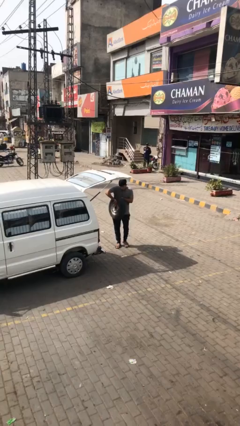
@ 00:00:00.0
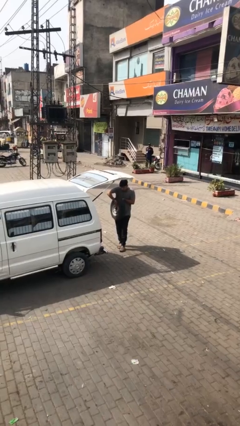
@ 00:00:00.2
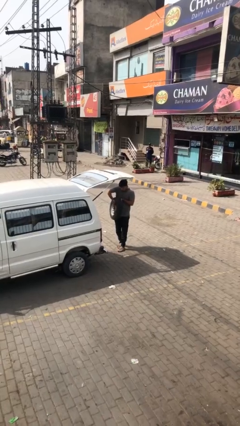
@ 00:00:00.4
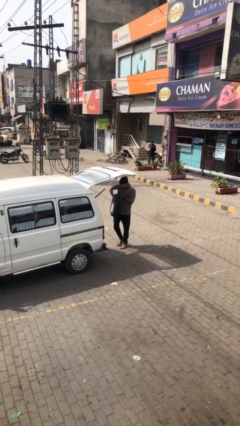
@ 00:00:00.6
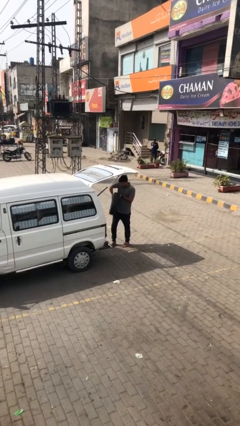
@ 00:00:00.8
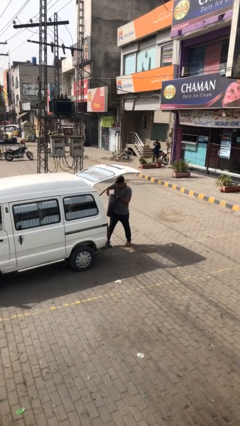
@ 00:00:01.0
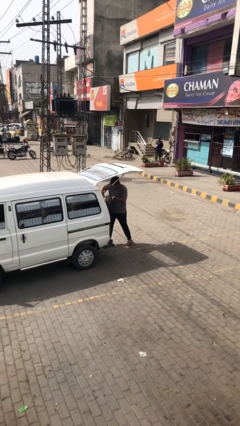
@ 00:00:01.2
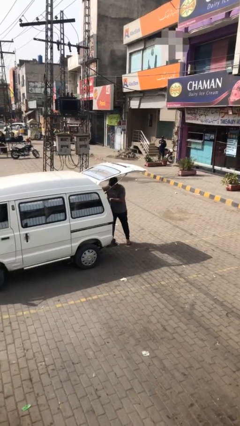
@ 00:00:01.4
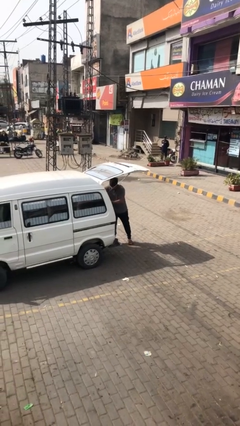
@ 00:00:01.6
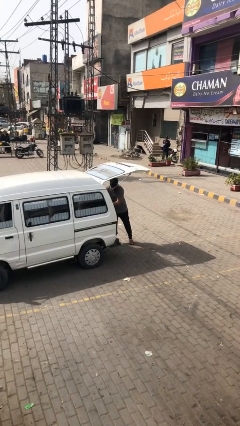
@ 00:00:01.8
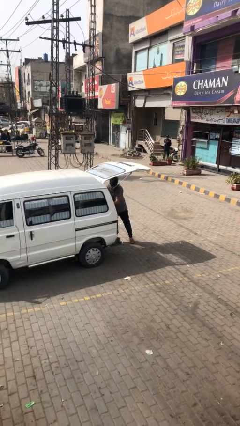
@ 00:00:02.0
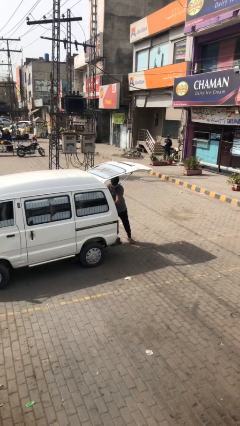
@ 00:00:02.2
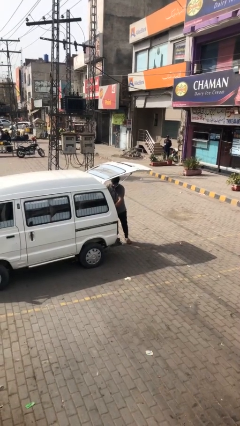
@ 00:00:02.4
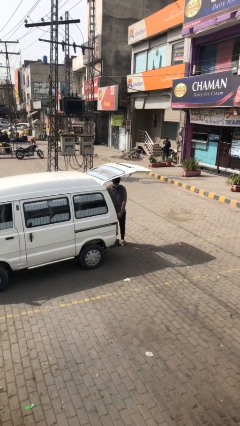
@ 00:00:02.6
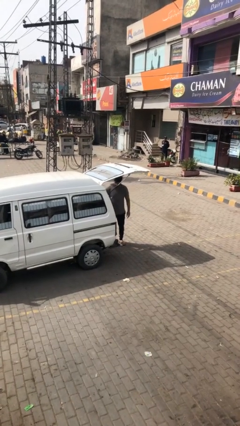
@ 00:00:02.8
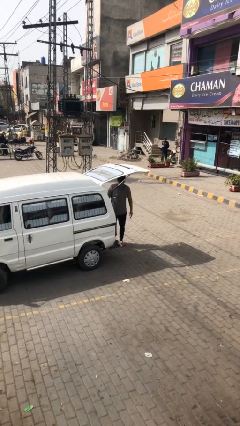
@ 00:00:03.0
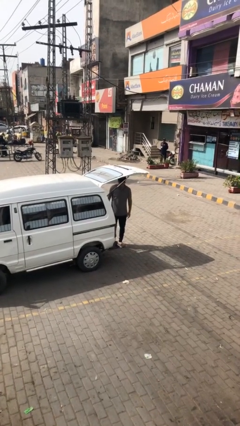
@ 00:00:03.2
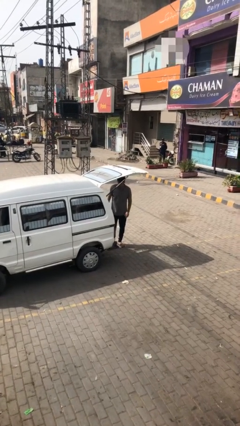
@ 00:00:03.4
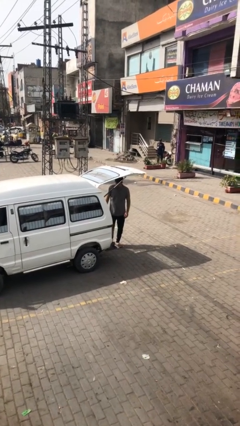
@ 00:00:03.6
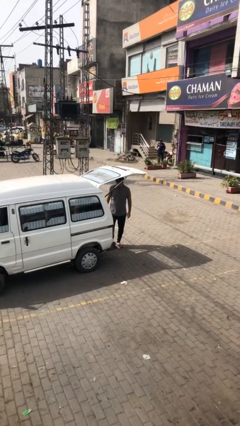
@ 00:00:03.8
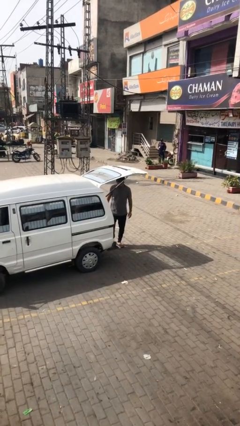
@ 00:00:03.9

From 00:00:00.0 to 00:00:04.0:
person loads car

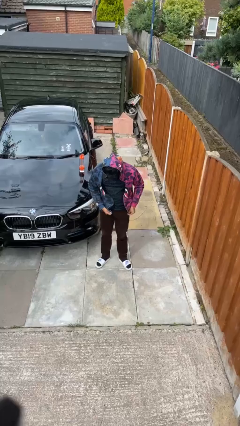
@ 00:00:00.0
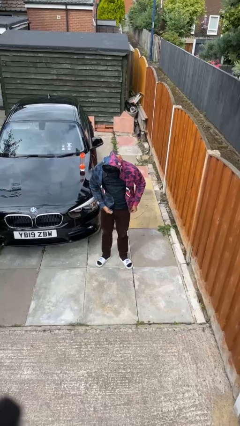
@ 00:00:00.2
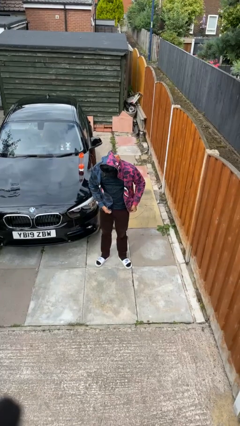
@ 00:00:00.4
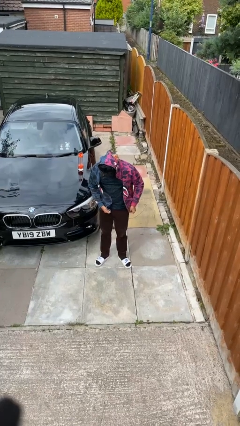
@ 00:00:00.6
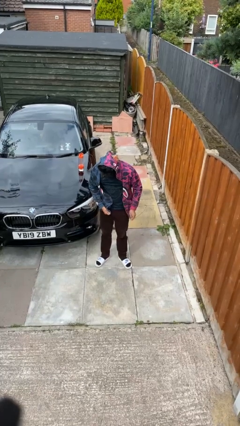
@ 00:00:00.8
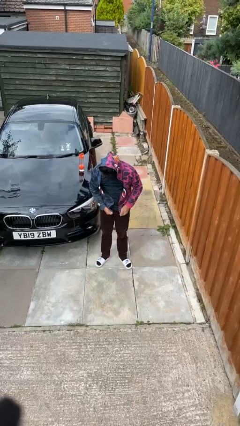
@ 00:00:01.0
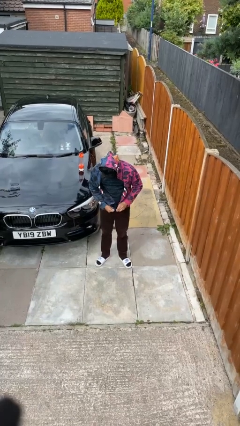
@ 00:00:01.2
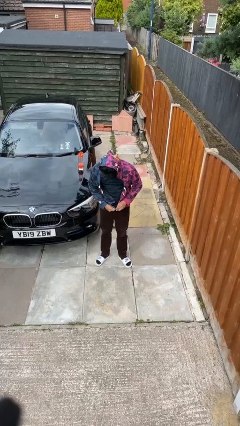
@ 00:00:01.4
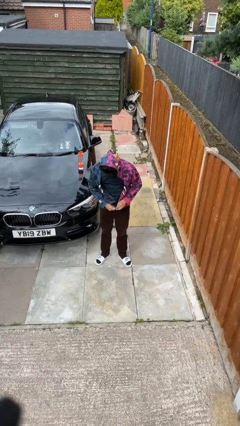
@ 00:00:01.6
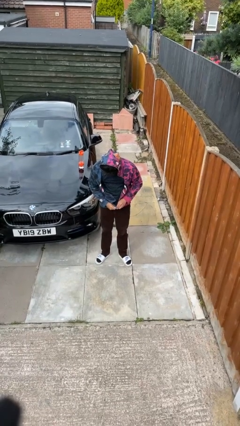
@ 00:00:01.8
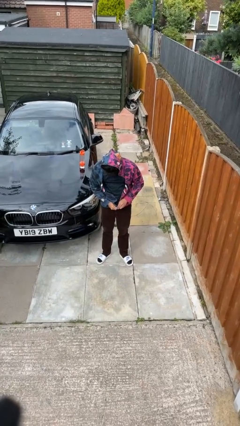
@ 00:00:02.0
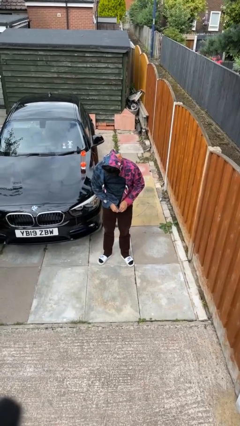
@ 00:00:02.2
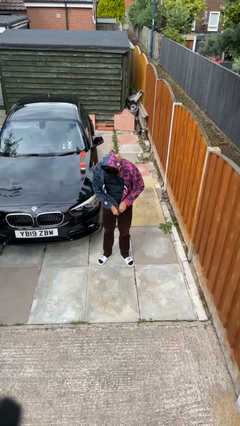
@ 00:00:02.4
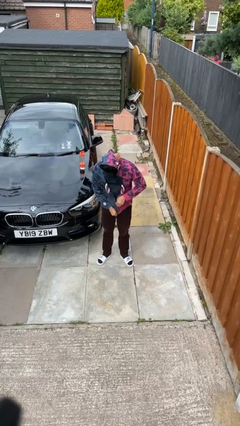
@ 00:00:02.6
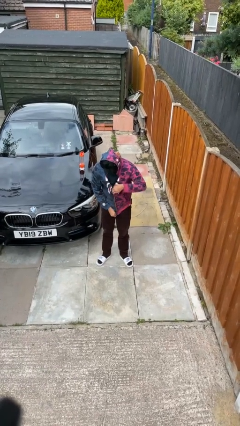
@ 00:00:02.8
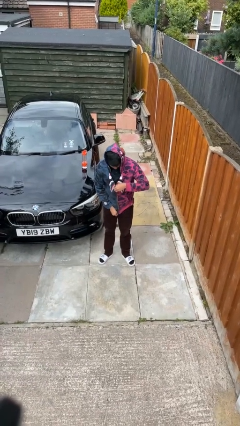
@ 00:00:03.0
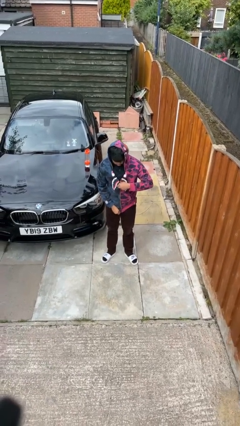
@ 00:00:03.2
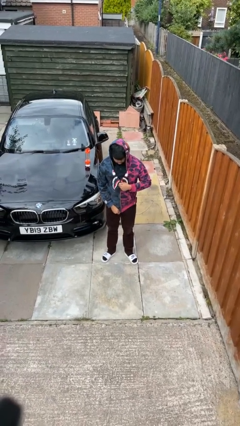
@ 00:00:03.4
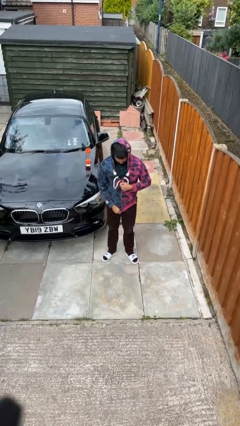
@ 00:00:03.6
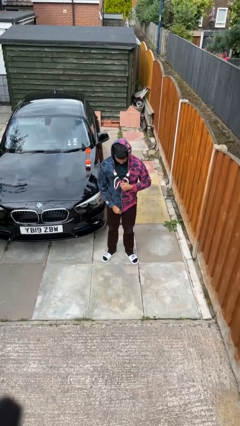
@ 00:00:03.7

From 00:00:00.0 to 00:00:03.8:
person zips up jacket

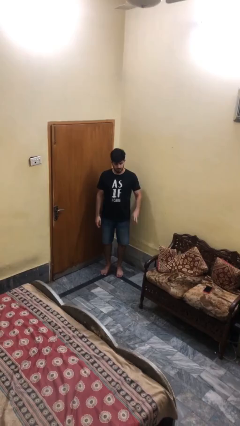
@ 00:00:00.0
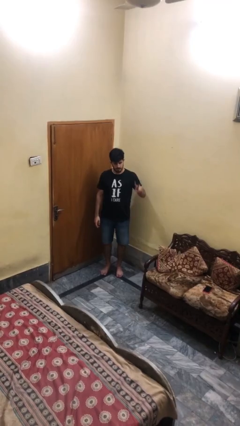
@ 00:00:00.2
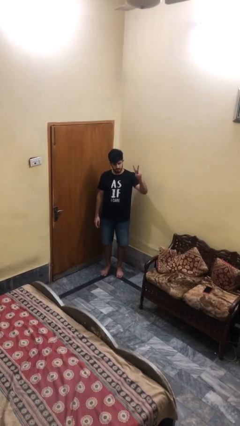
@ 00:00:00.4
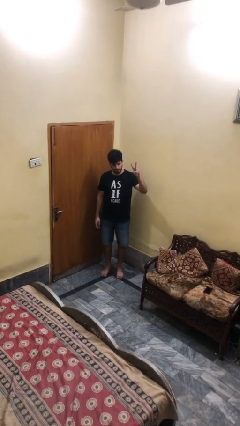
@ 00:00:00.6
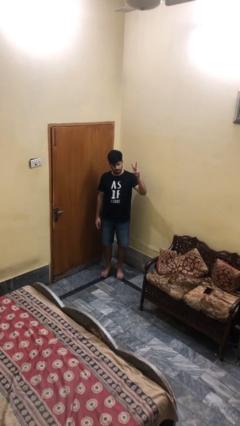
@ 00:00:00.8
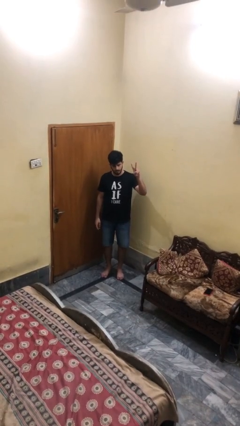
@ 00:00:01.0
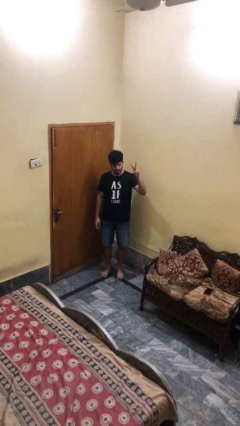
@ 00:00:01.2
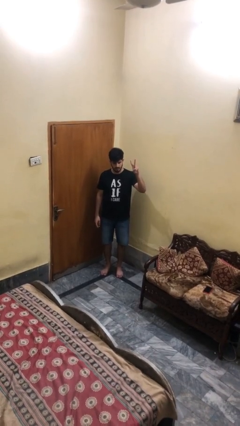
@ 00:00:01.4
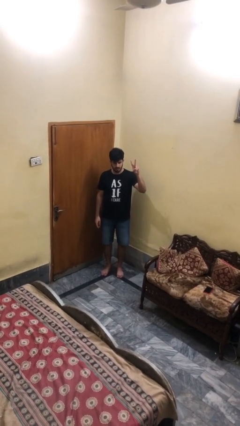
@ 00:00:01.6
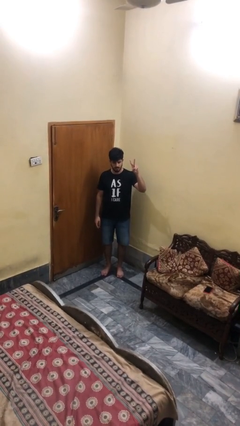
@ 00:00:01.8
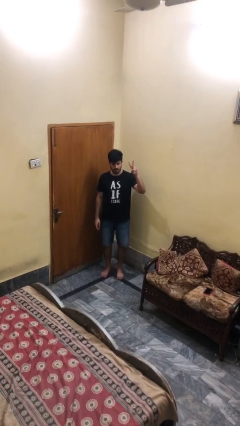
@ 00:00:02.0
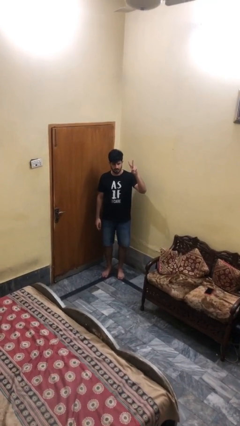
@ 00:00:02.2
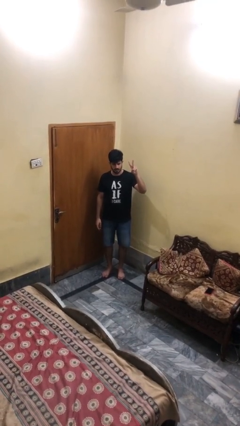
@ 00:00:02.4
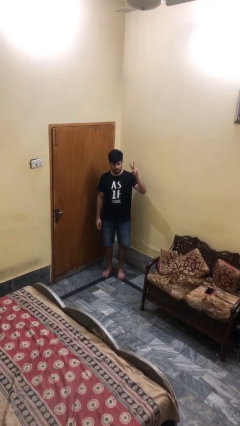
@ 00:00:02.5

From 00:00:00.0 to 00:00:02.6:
person gestures peace

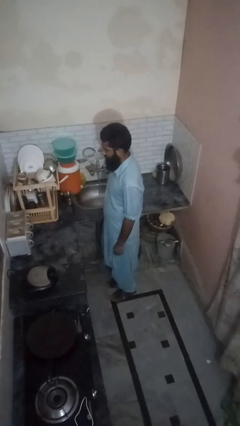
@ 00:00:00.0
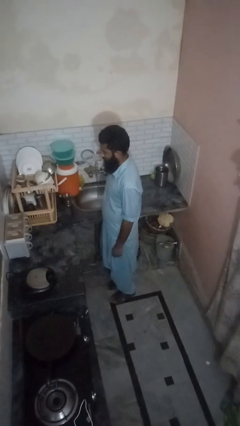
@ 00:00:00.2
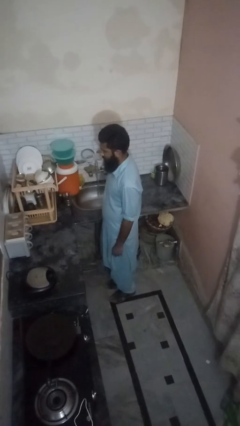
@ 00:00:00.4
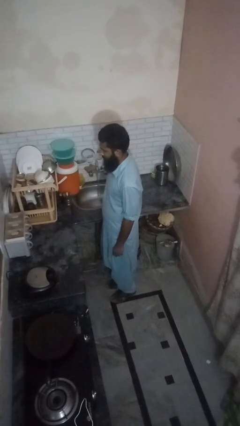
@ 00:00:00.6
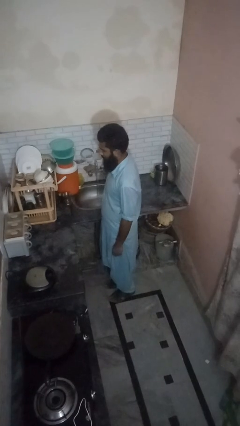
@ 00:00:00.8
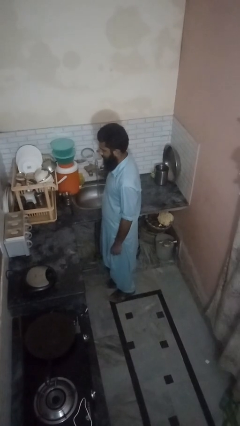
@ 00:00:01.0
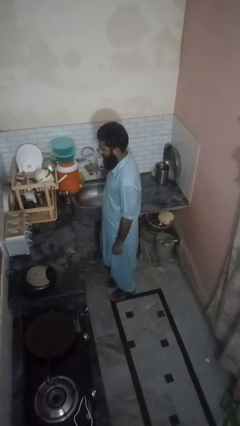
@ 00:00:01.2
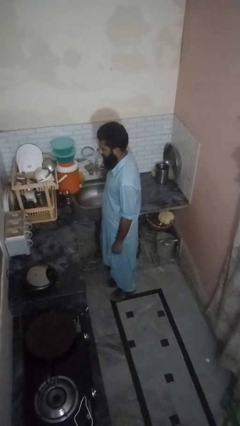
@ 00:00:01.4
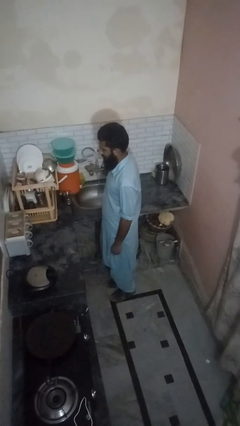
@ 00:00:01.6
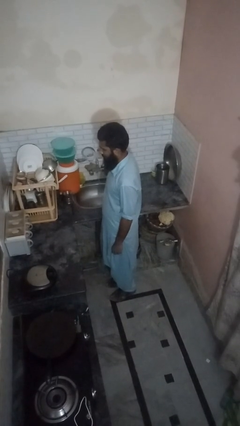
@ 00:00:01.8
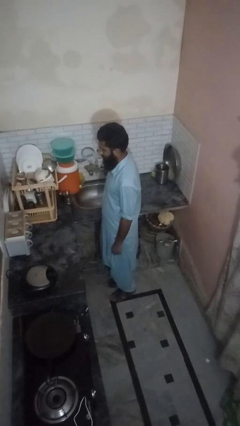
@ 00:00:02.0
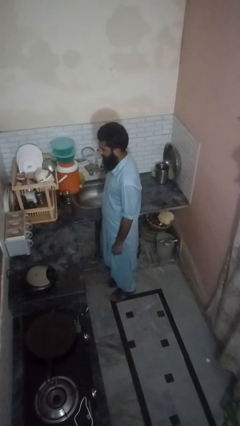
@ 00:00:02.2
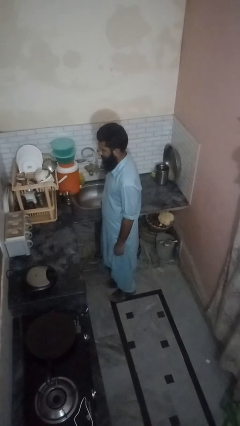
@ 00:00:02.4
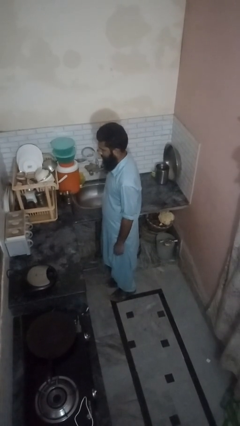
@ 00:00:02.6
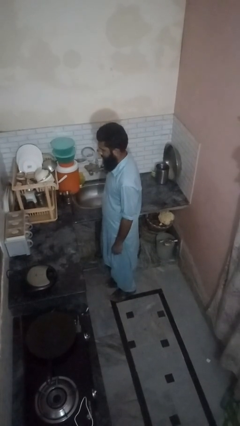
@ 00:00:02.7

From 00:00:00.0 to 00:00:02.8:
person turns off faucet

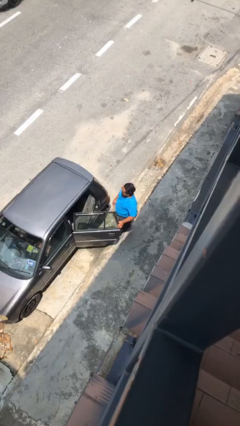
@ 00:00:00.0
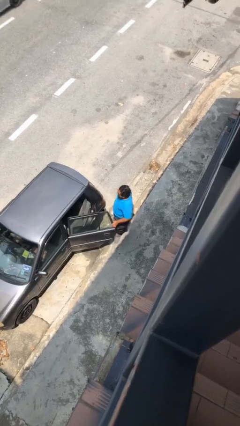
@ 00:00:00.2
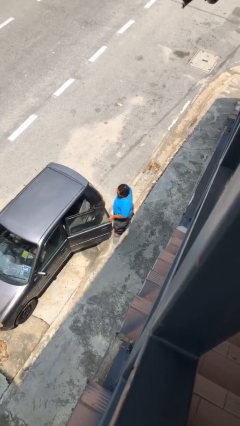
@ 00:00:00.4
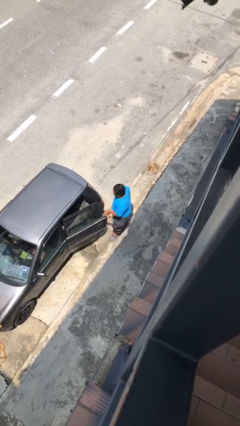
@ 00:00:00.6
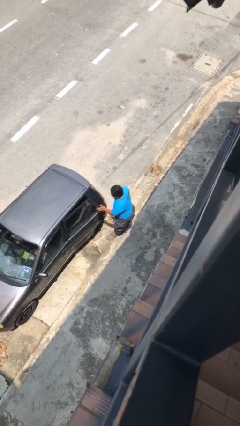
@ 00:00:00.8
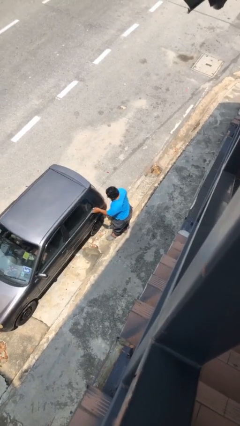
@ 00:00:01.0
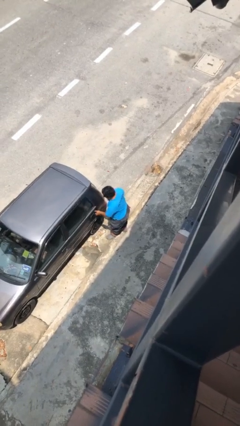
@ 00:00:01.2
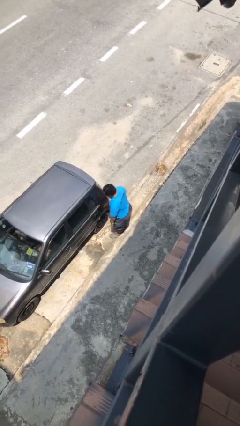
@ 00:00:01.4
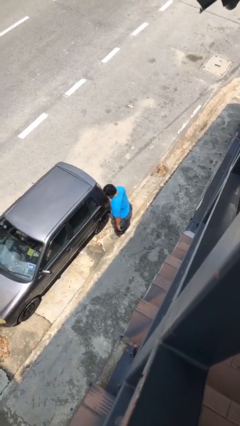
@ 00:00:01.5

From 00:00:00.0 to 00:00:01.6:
person closes car door

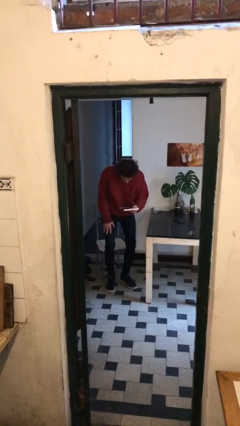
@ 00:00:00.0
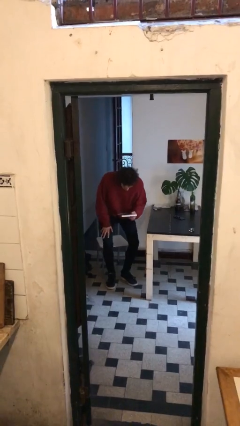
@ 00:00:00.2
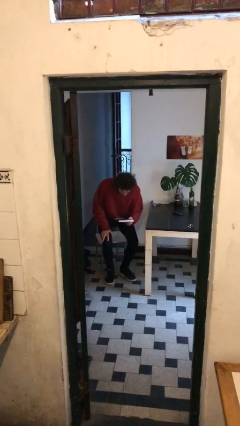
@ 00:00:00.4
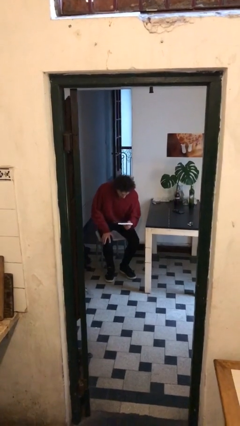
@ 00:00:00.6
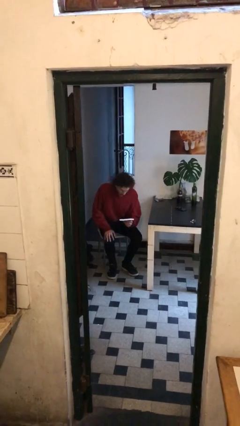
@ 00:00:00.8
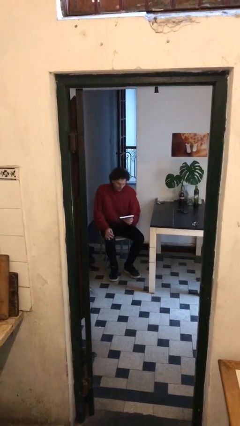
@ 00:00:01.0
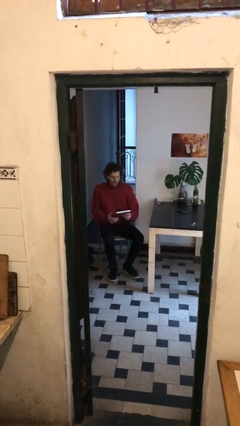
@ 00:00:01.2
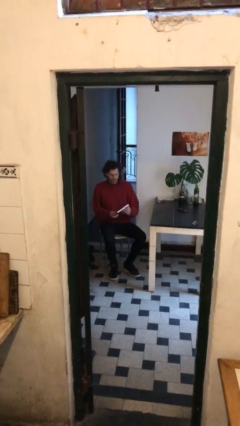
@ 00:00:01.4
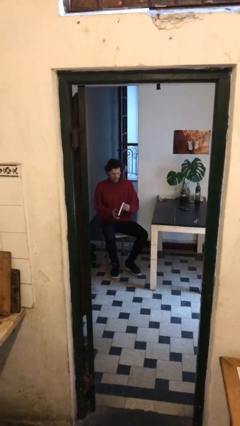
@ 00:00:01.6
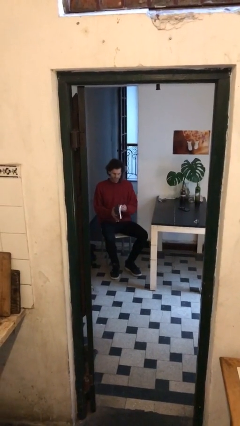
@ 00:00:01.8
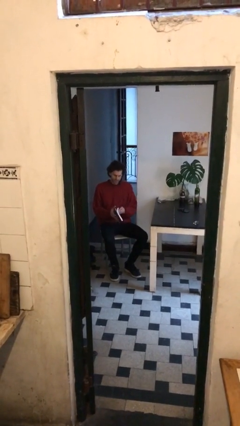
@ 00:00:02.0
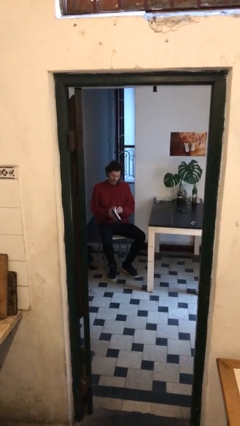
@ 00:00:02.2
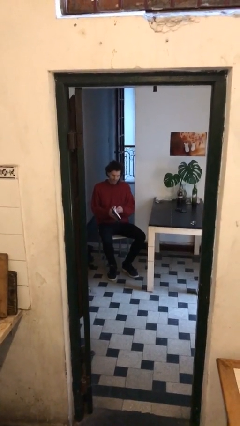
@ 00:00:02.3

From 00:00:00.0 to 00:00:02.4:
person sits down
